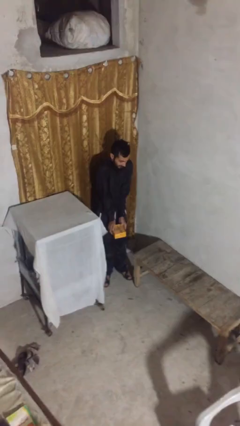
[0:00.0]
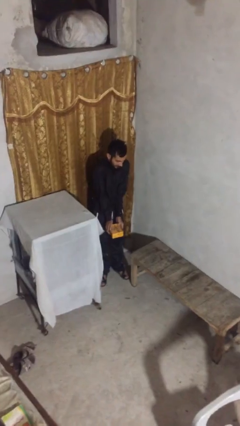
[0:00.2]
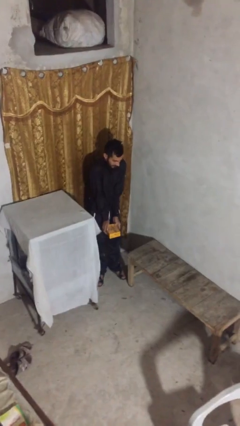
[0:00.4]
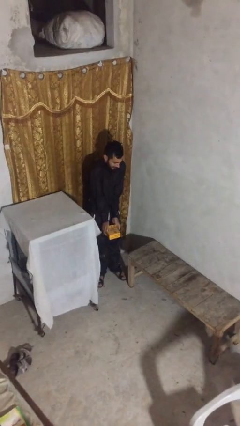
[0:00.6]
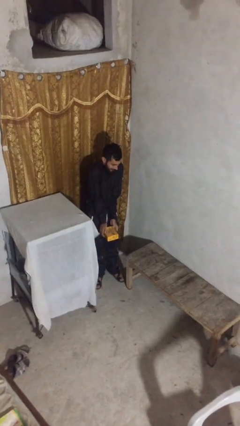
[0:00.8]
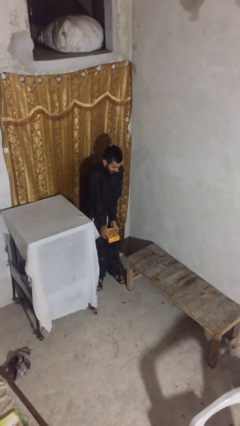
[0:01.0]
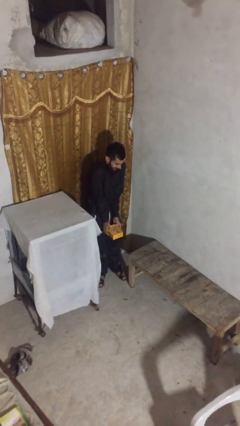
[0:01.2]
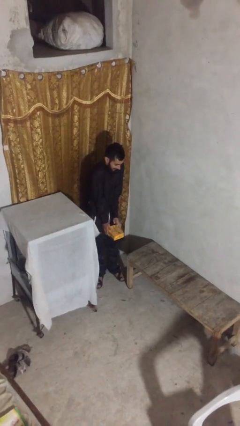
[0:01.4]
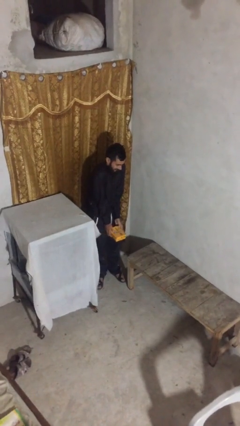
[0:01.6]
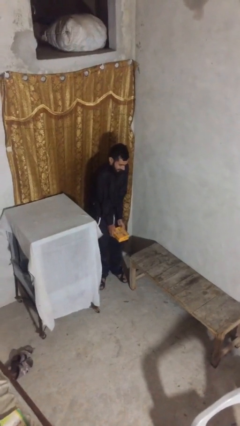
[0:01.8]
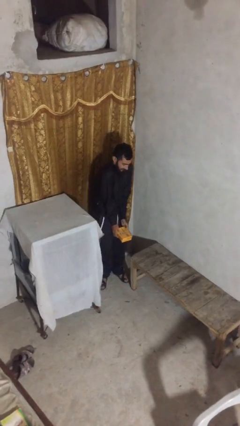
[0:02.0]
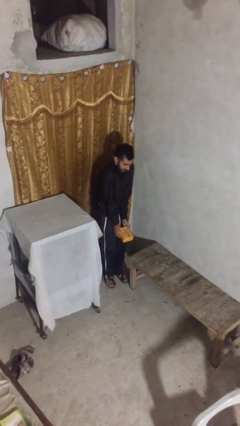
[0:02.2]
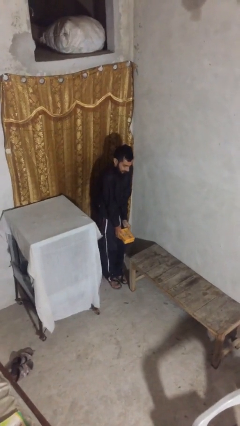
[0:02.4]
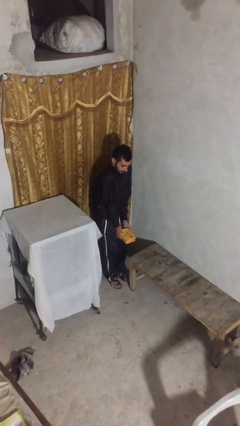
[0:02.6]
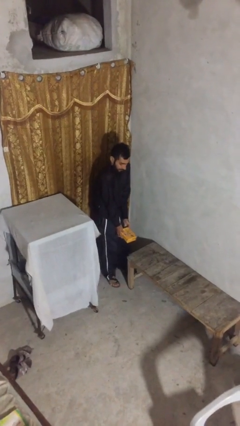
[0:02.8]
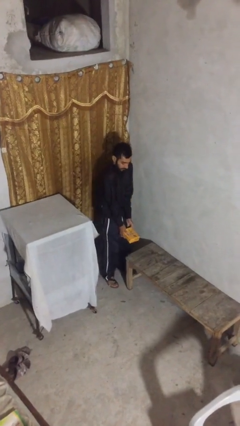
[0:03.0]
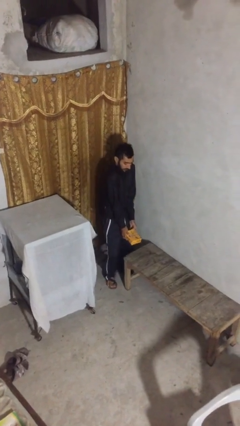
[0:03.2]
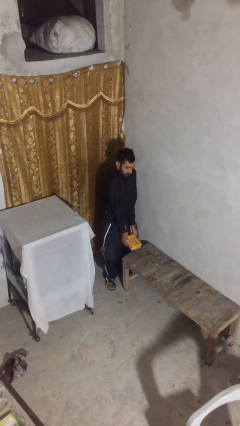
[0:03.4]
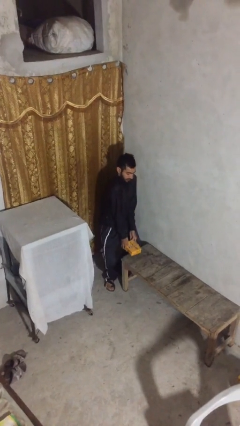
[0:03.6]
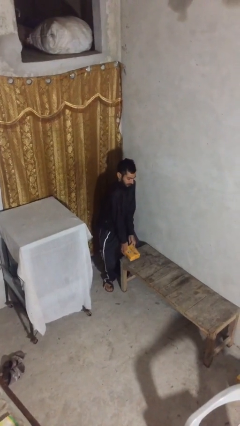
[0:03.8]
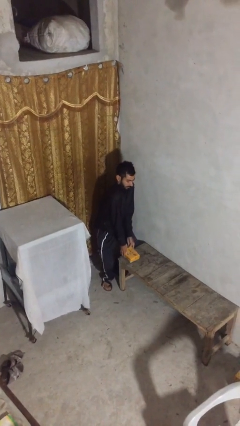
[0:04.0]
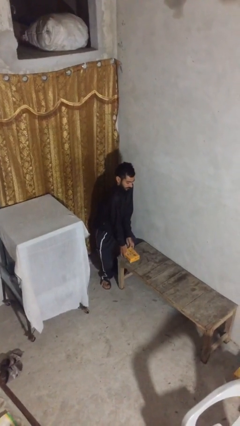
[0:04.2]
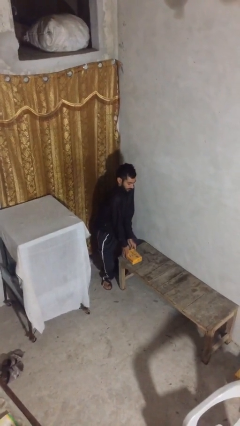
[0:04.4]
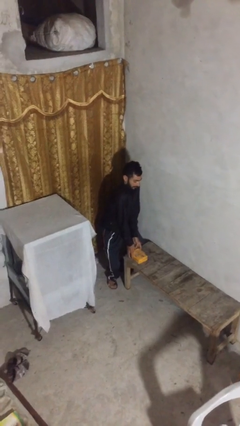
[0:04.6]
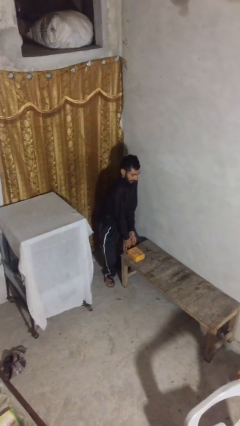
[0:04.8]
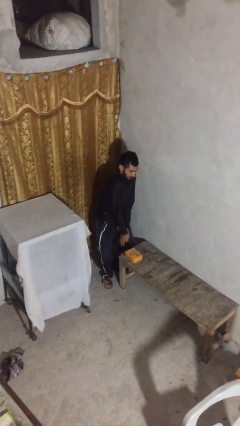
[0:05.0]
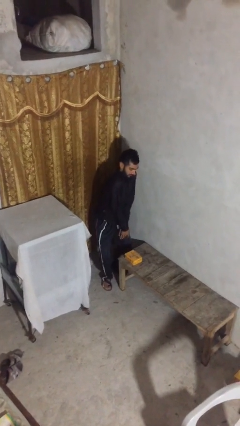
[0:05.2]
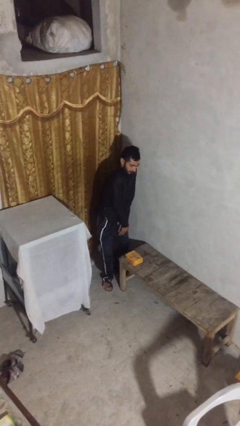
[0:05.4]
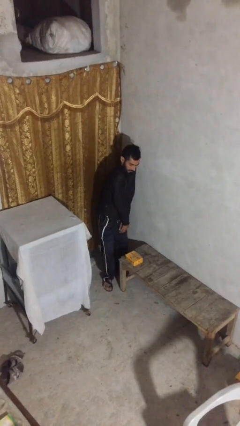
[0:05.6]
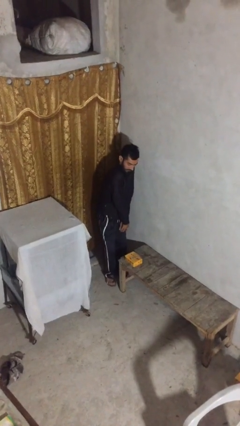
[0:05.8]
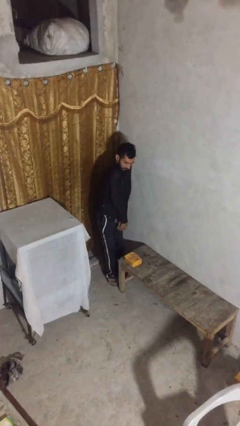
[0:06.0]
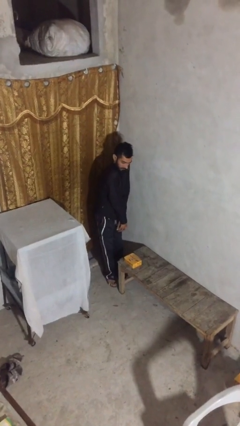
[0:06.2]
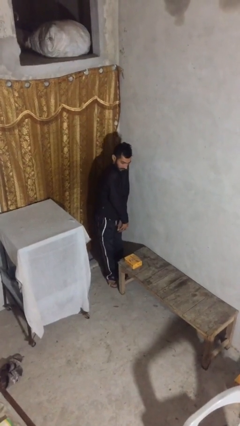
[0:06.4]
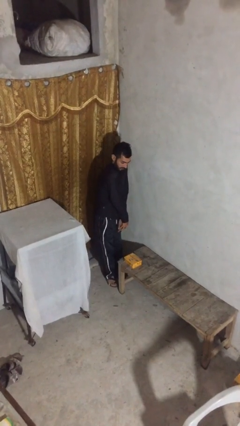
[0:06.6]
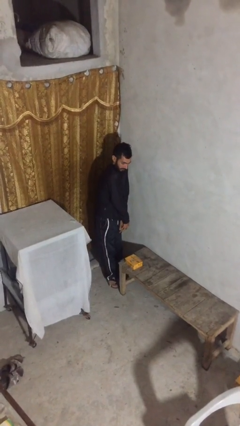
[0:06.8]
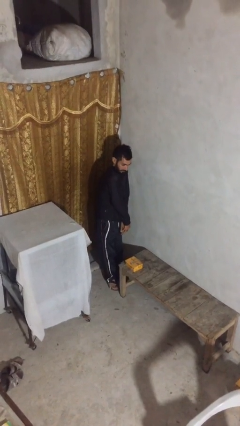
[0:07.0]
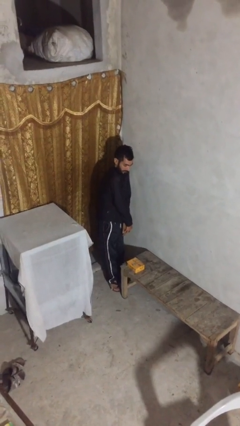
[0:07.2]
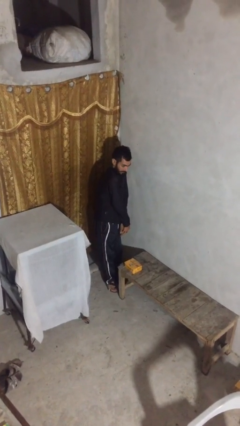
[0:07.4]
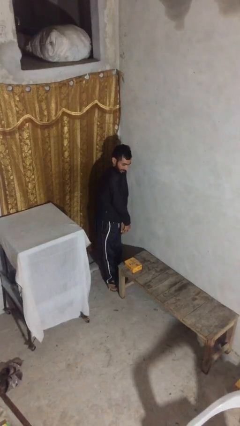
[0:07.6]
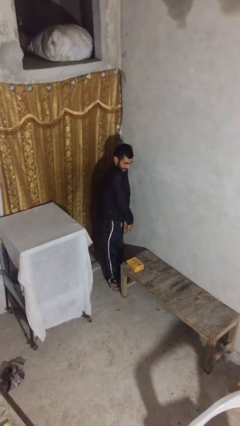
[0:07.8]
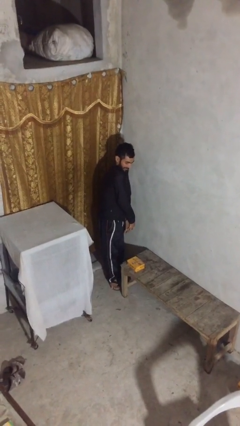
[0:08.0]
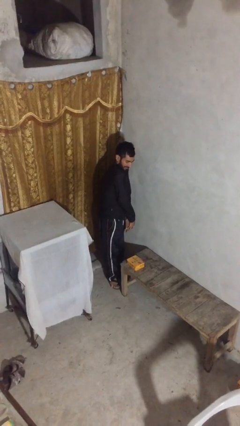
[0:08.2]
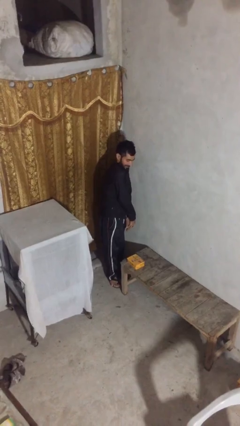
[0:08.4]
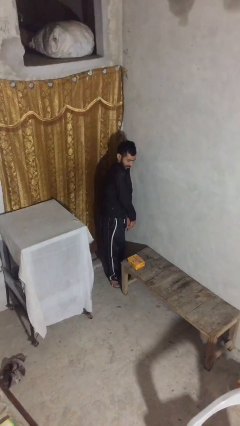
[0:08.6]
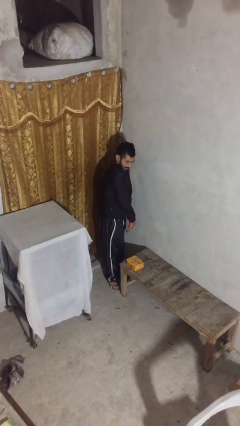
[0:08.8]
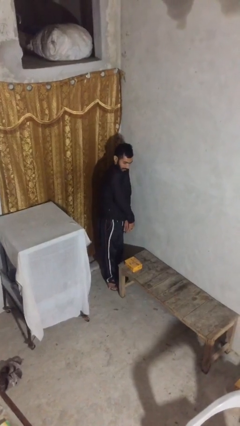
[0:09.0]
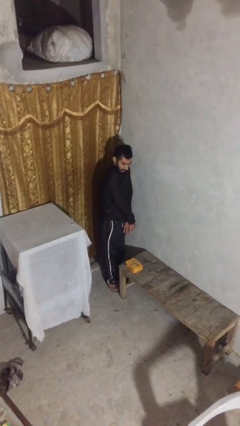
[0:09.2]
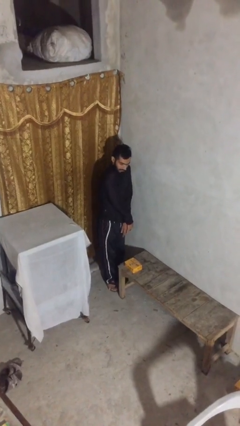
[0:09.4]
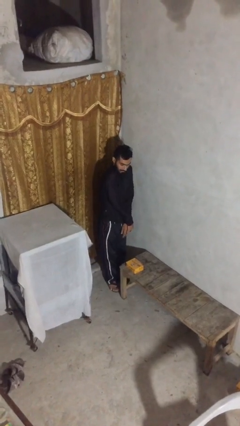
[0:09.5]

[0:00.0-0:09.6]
person puts down object on table

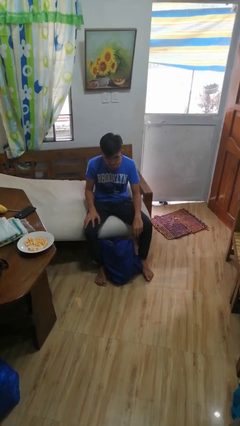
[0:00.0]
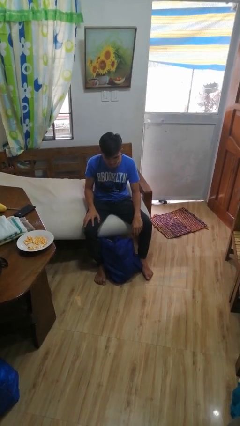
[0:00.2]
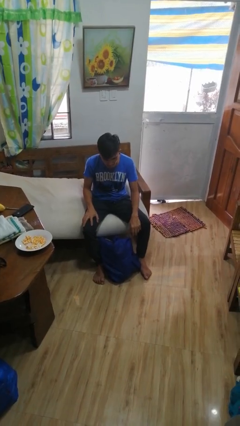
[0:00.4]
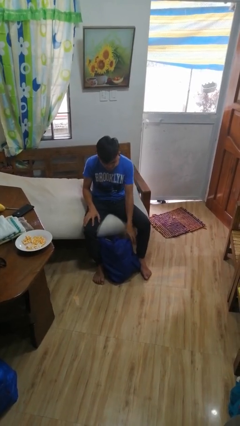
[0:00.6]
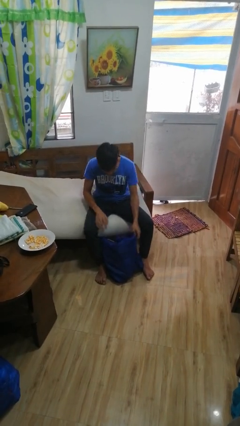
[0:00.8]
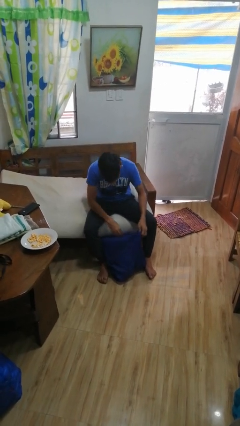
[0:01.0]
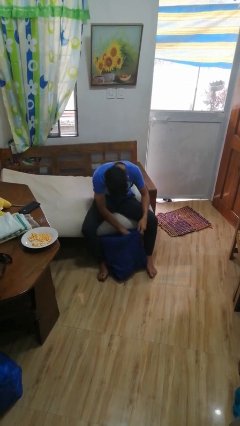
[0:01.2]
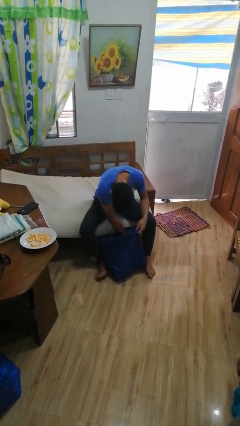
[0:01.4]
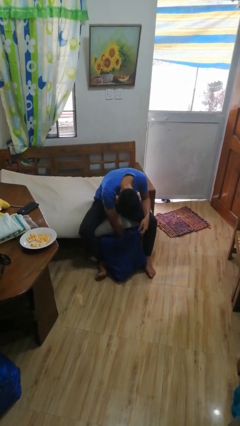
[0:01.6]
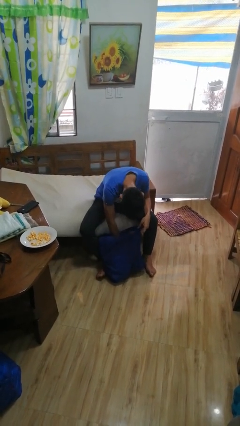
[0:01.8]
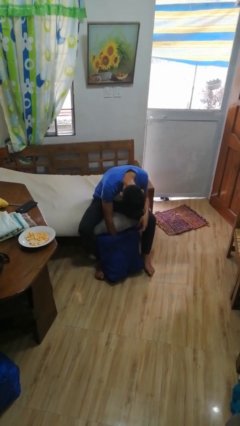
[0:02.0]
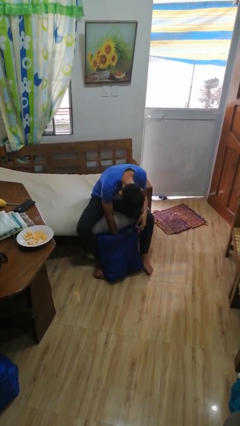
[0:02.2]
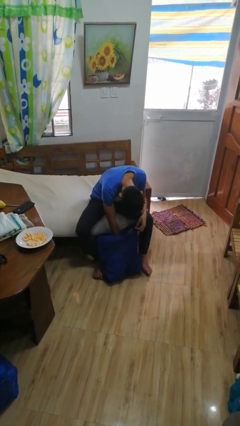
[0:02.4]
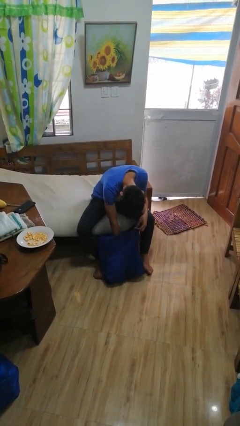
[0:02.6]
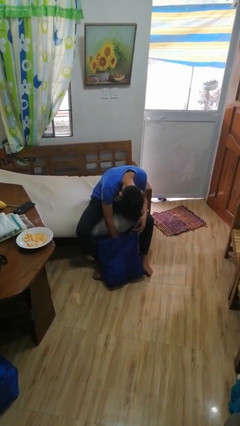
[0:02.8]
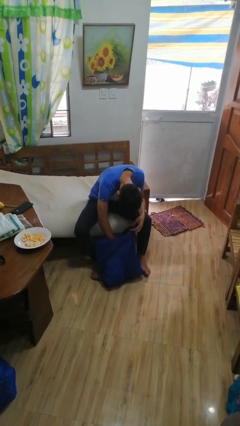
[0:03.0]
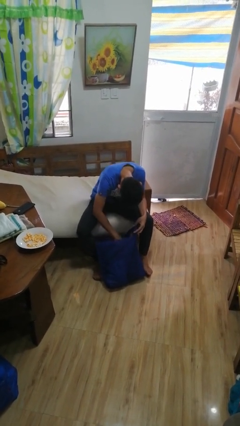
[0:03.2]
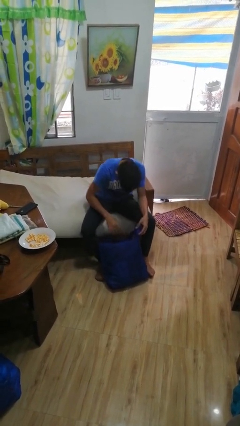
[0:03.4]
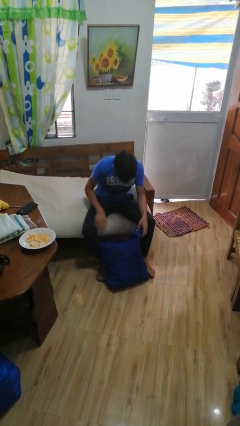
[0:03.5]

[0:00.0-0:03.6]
person searches in bag

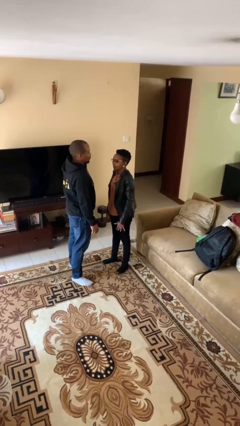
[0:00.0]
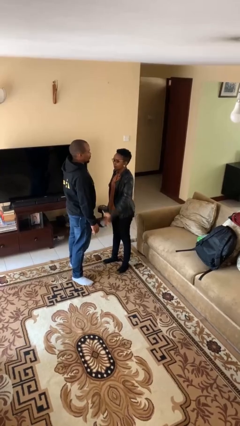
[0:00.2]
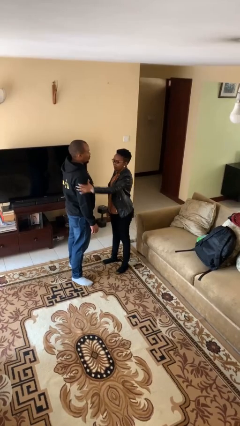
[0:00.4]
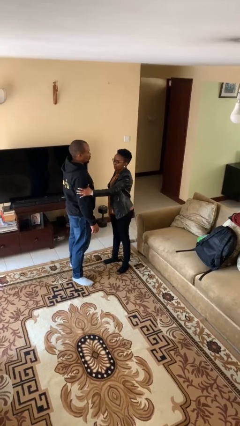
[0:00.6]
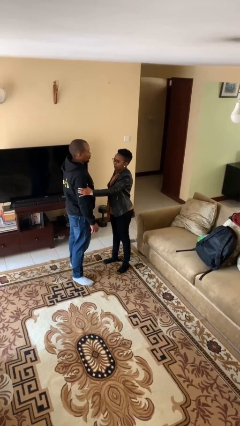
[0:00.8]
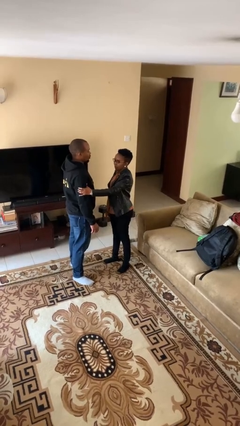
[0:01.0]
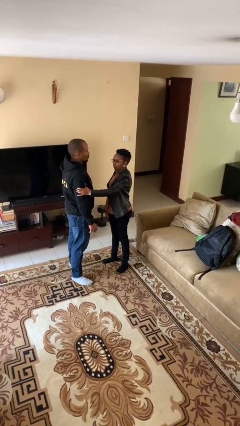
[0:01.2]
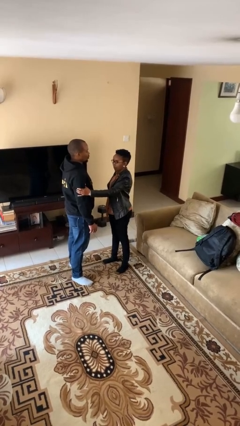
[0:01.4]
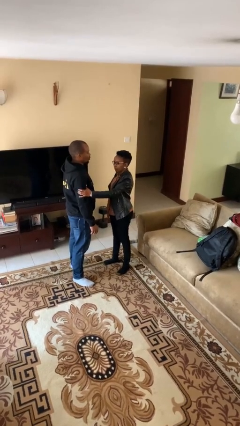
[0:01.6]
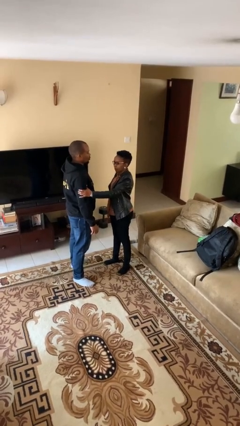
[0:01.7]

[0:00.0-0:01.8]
person grabs person by bicep

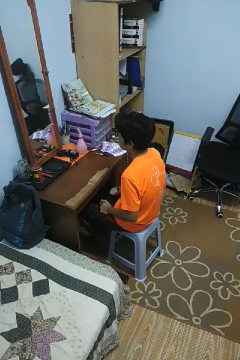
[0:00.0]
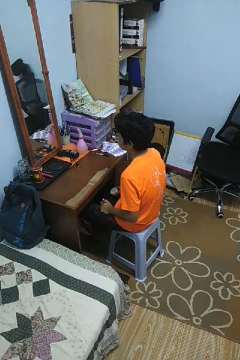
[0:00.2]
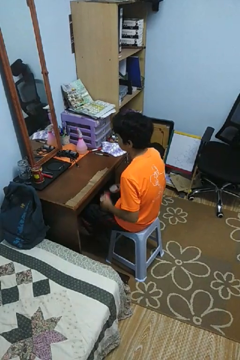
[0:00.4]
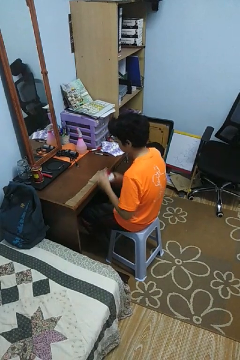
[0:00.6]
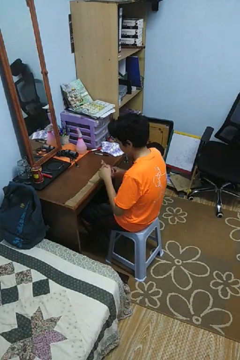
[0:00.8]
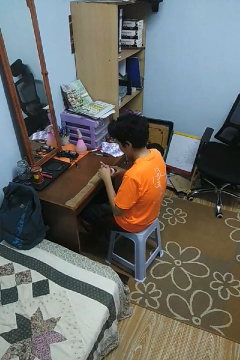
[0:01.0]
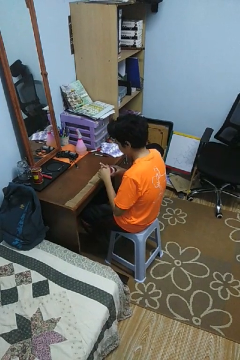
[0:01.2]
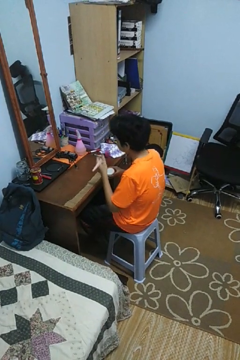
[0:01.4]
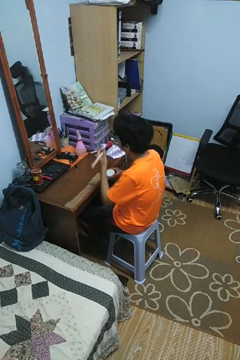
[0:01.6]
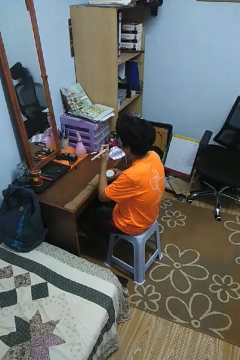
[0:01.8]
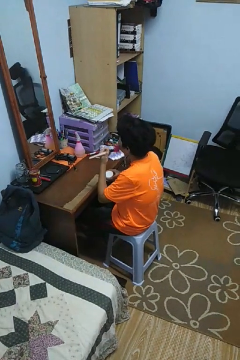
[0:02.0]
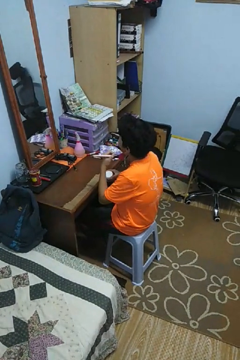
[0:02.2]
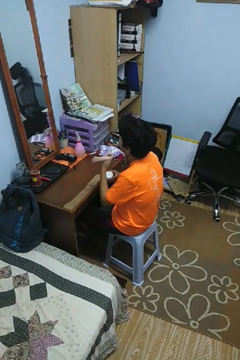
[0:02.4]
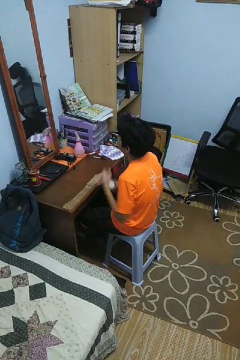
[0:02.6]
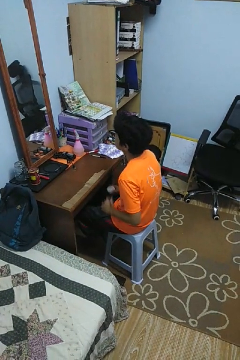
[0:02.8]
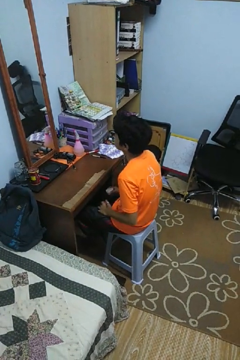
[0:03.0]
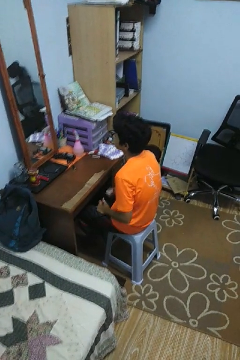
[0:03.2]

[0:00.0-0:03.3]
person applies foundation makeup
